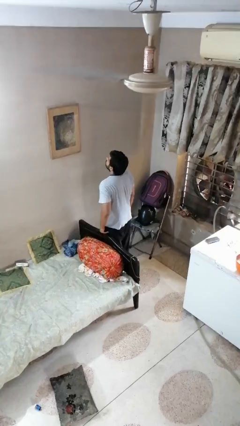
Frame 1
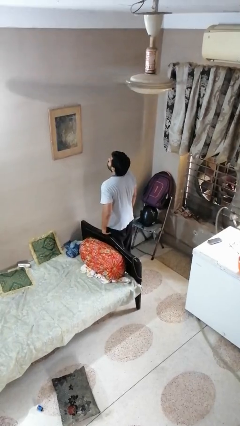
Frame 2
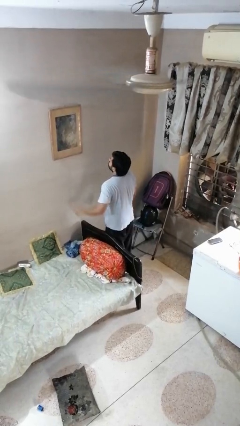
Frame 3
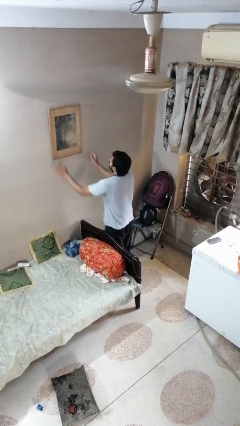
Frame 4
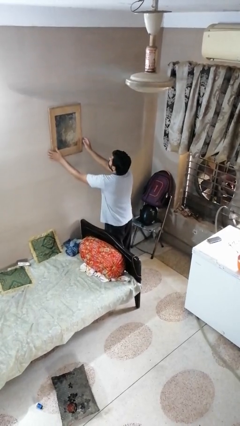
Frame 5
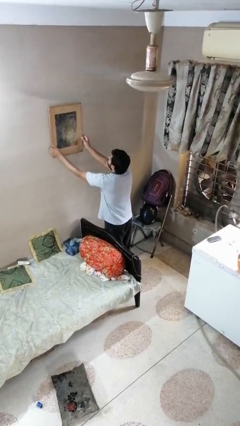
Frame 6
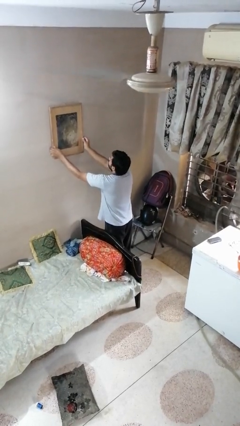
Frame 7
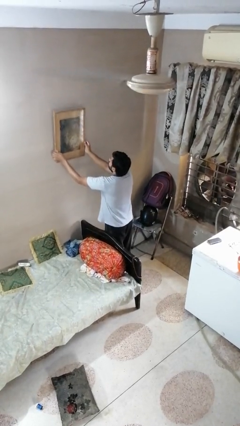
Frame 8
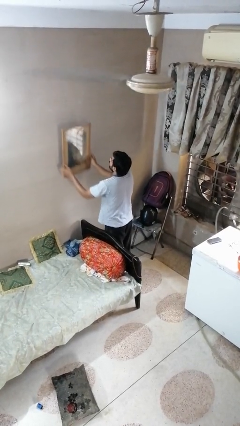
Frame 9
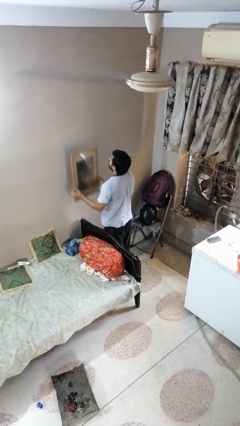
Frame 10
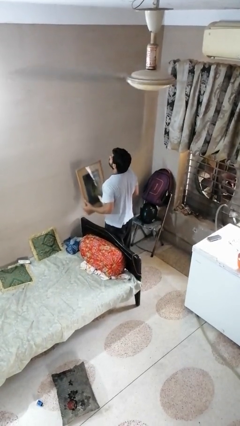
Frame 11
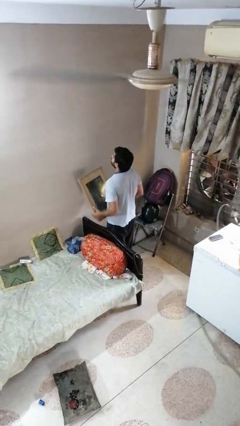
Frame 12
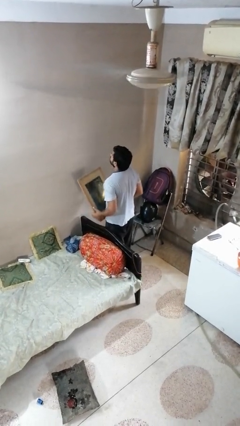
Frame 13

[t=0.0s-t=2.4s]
person takes down picture frame

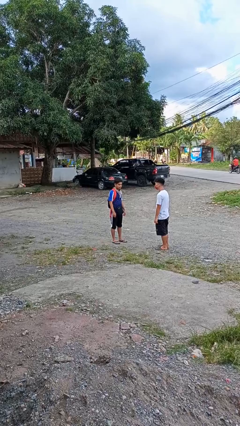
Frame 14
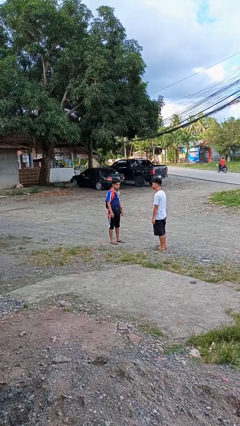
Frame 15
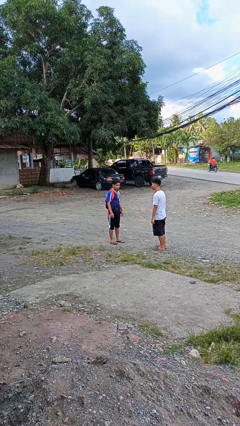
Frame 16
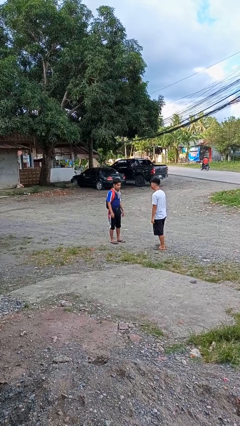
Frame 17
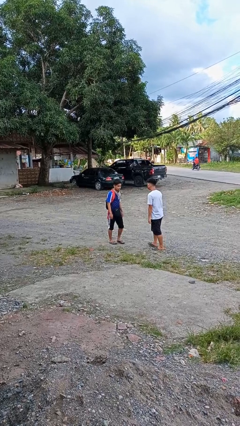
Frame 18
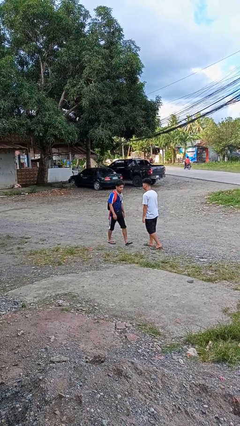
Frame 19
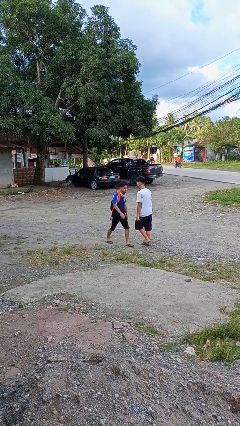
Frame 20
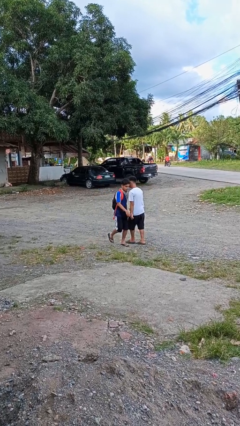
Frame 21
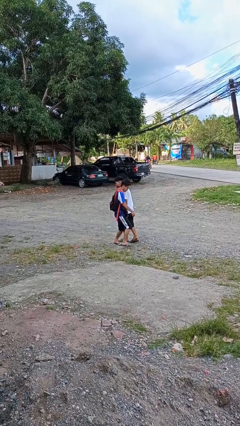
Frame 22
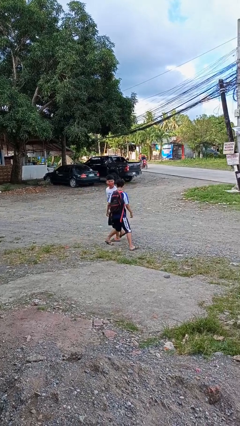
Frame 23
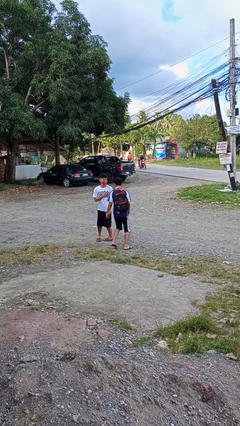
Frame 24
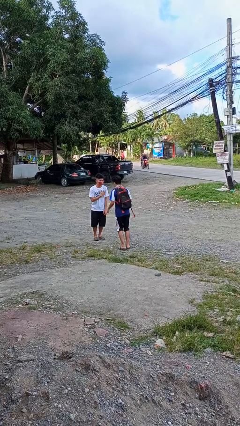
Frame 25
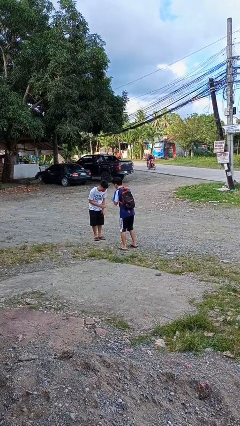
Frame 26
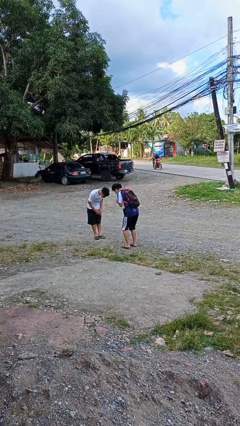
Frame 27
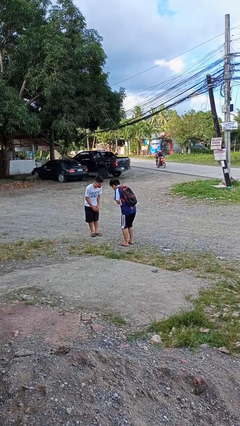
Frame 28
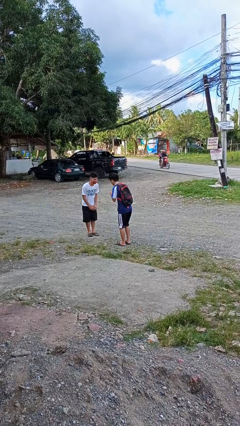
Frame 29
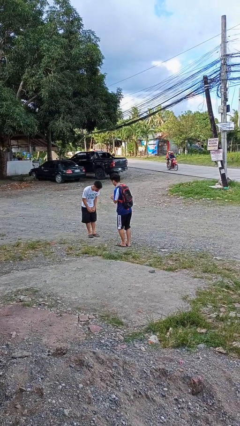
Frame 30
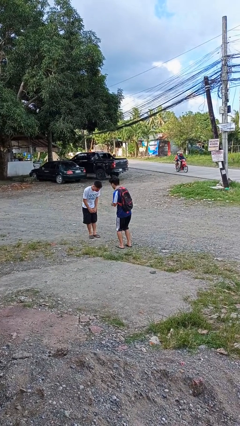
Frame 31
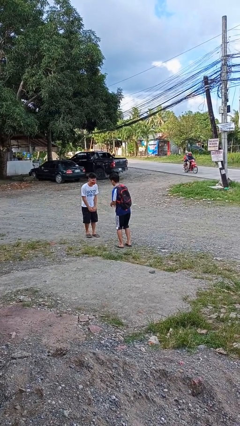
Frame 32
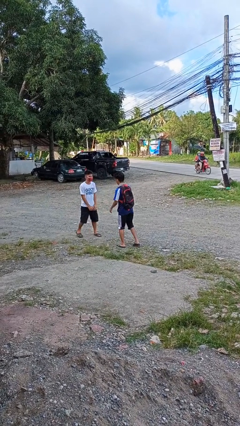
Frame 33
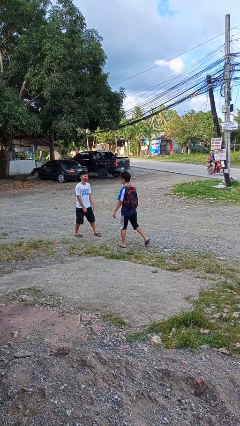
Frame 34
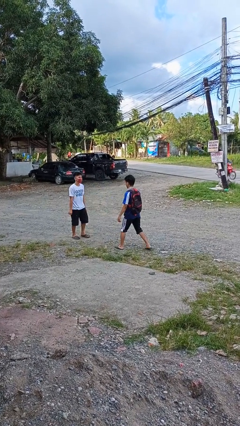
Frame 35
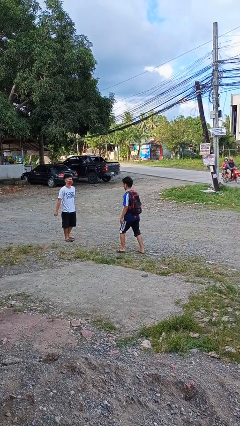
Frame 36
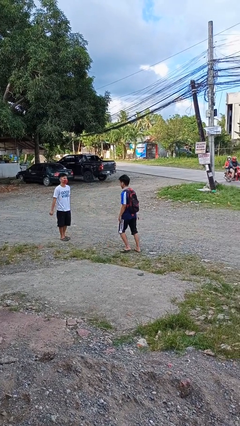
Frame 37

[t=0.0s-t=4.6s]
person bumps into person

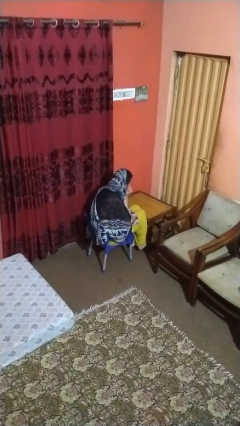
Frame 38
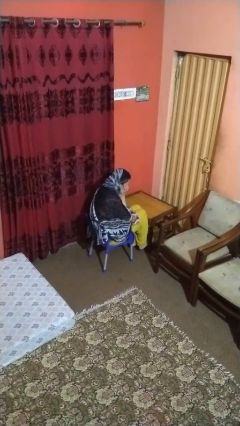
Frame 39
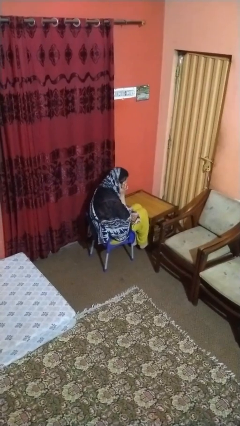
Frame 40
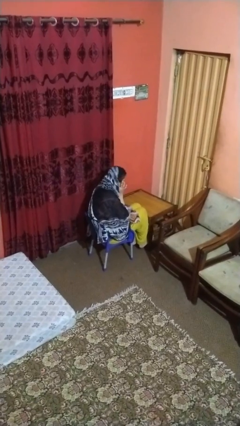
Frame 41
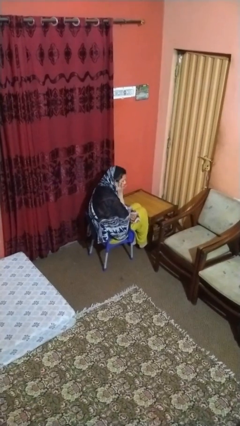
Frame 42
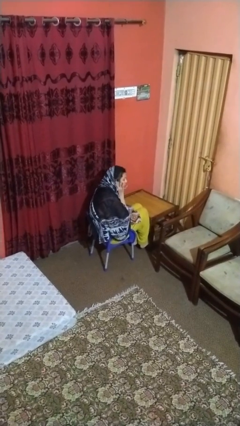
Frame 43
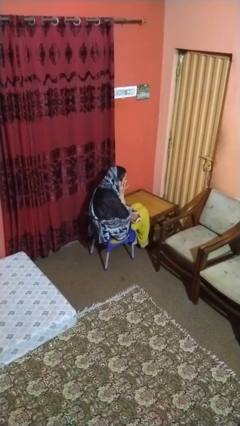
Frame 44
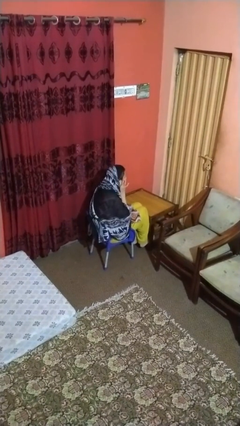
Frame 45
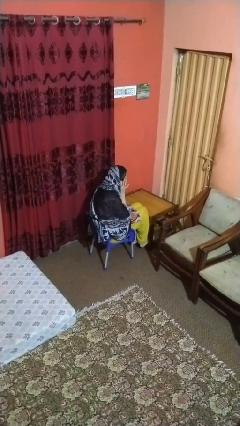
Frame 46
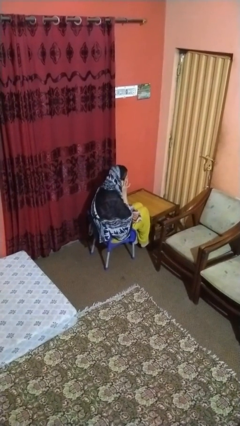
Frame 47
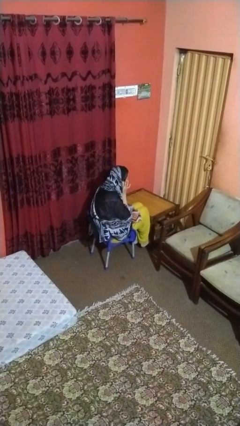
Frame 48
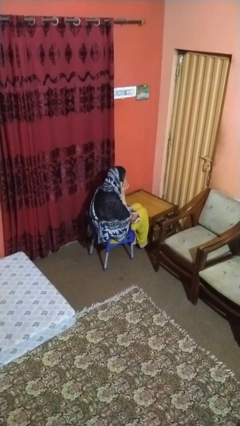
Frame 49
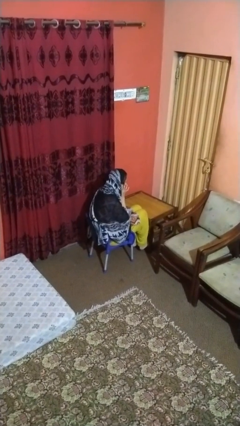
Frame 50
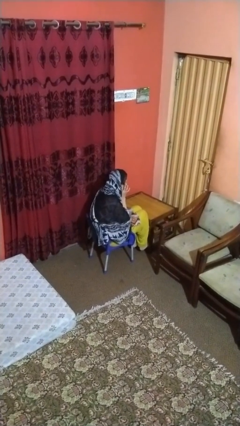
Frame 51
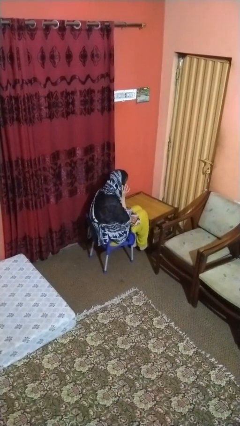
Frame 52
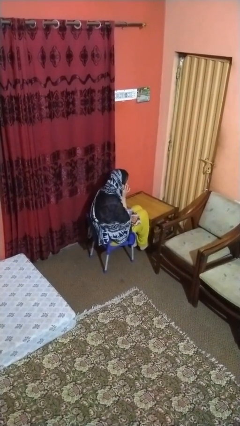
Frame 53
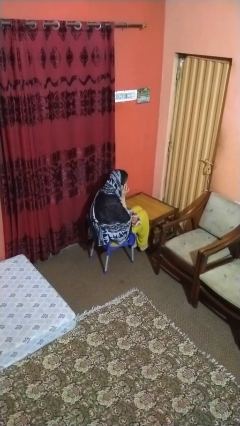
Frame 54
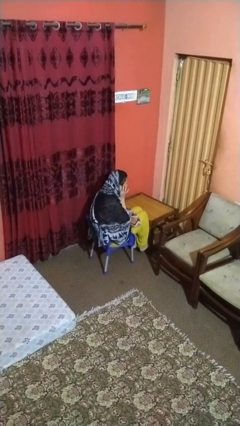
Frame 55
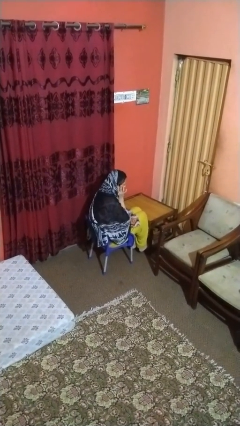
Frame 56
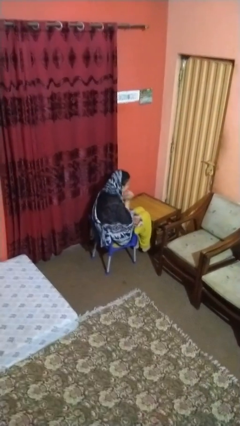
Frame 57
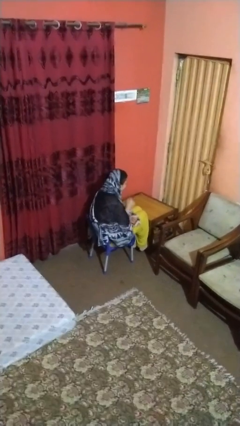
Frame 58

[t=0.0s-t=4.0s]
person puts fingers in ear

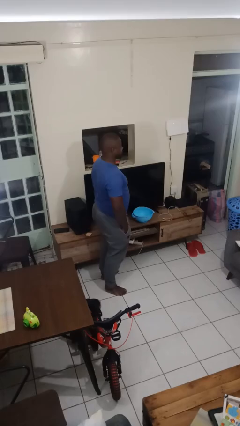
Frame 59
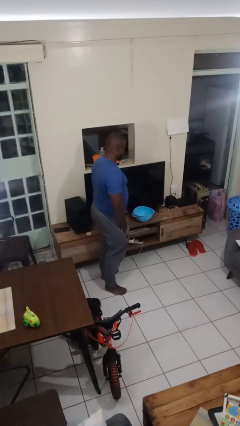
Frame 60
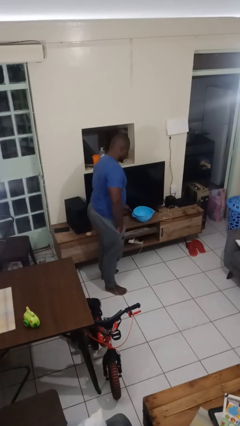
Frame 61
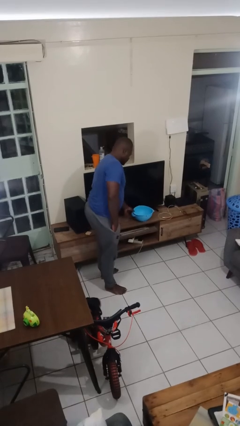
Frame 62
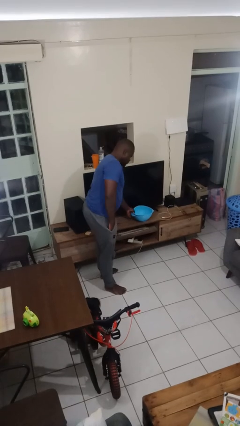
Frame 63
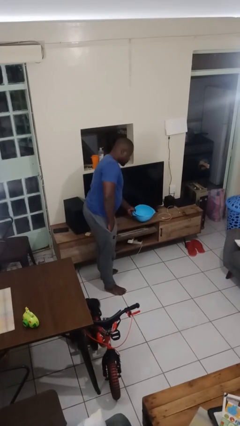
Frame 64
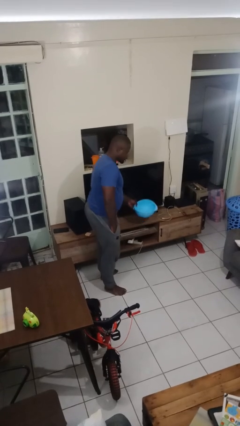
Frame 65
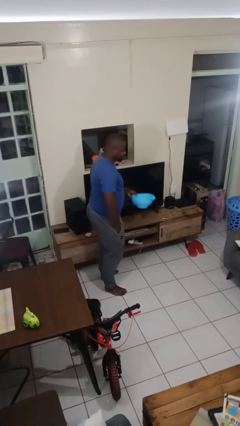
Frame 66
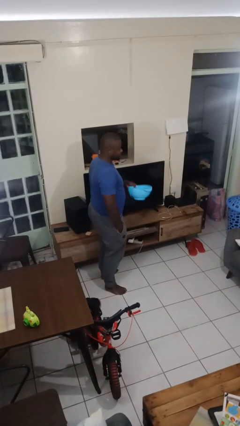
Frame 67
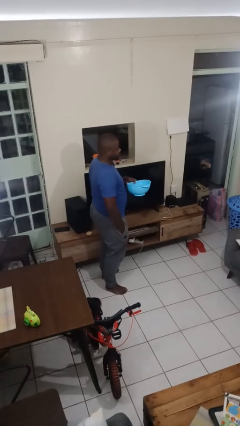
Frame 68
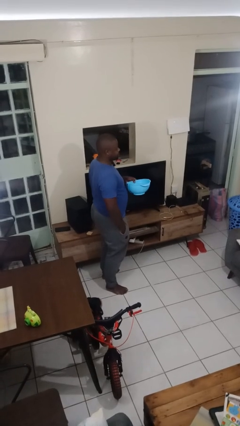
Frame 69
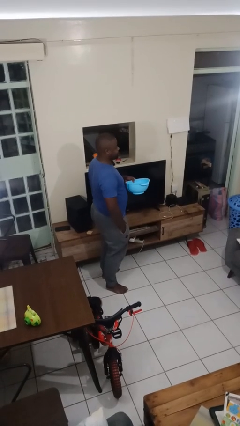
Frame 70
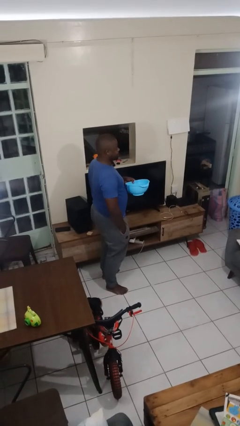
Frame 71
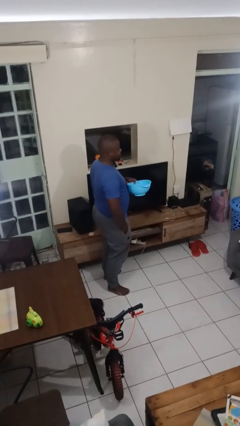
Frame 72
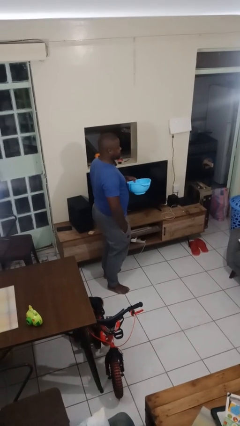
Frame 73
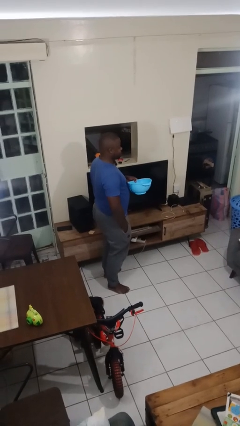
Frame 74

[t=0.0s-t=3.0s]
person picks up object from countertop

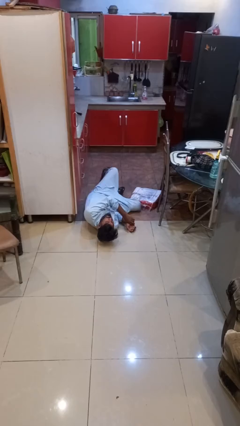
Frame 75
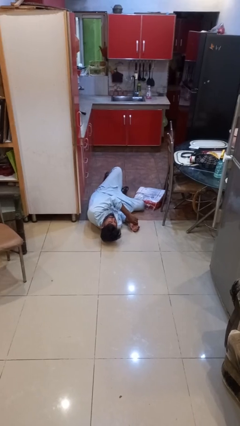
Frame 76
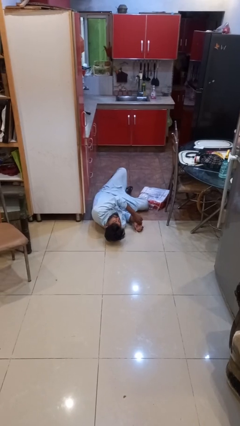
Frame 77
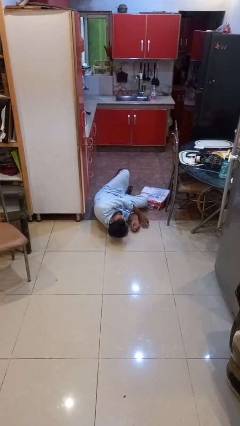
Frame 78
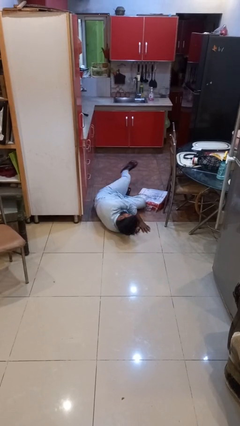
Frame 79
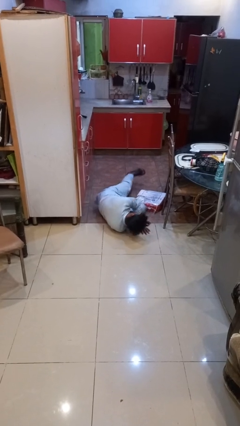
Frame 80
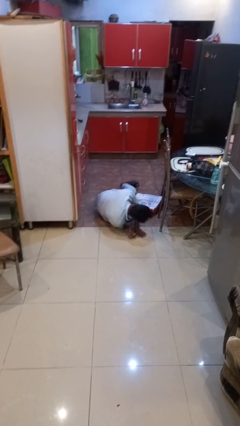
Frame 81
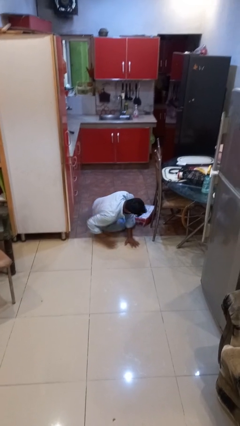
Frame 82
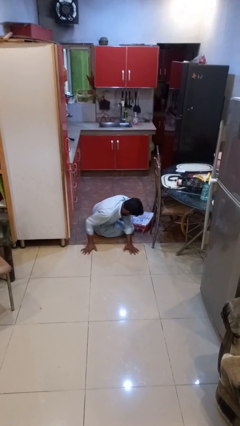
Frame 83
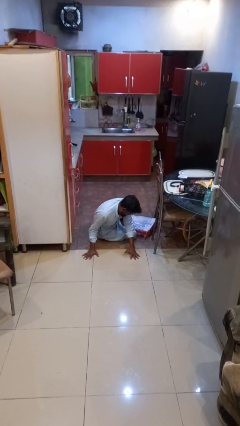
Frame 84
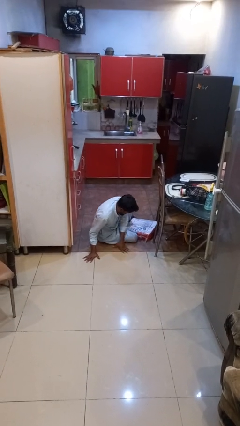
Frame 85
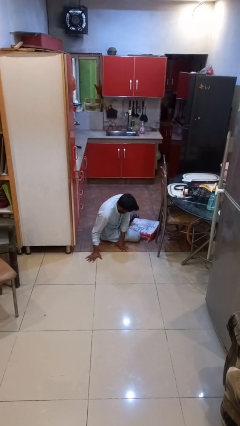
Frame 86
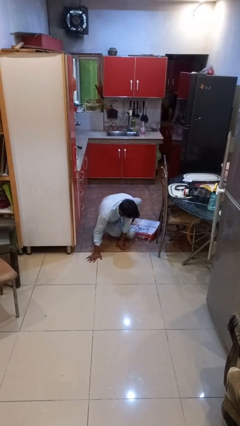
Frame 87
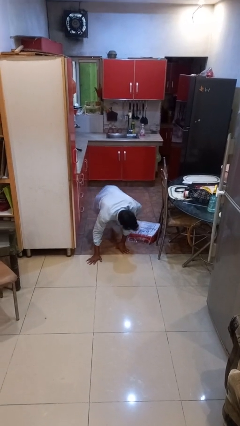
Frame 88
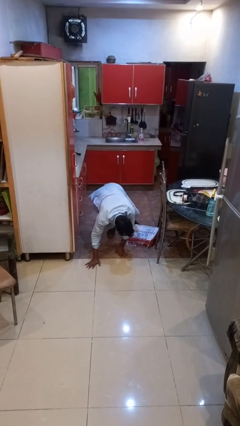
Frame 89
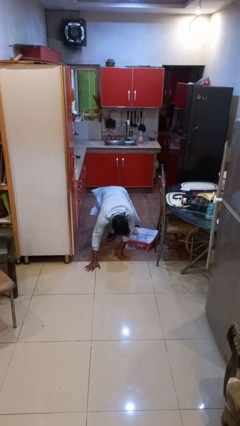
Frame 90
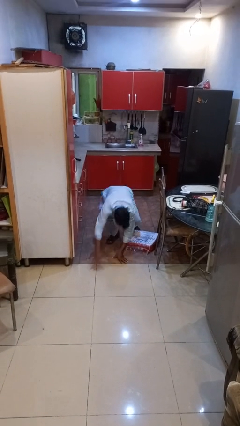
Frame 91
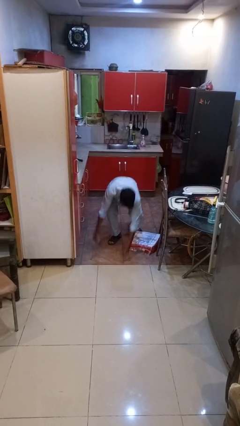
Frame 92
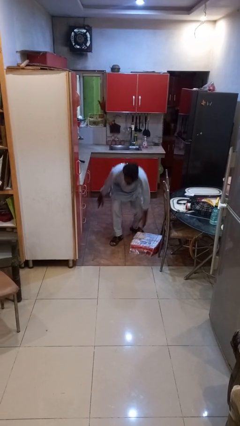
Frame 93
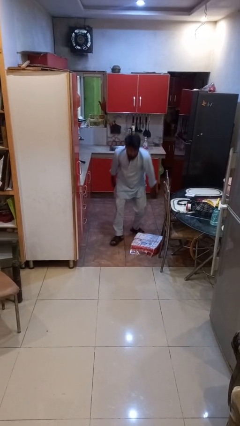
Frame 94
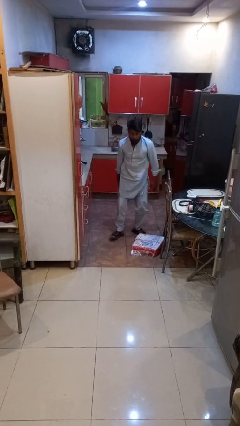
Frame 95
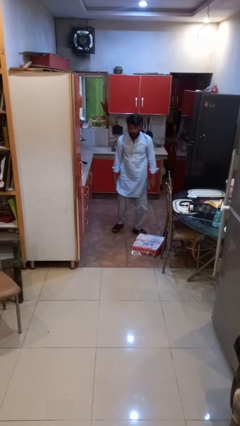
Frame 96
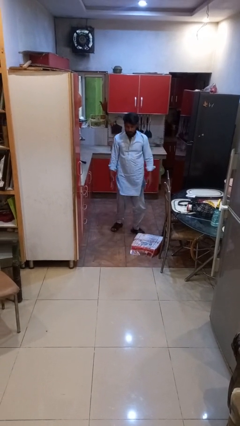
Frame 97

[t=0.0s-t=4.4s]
person stands up from floor
